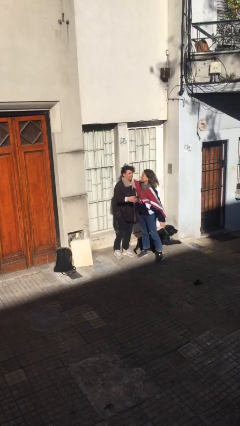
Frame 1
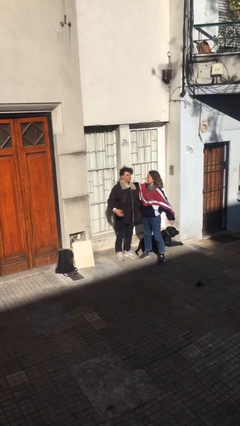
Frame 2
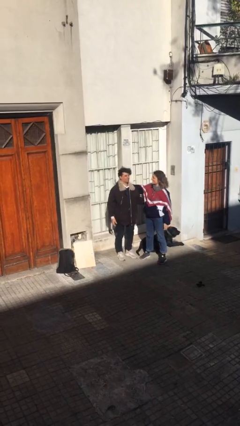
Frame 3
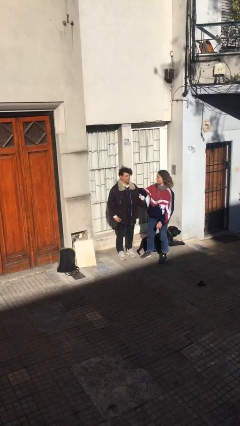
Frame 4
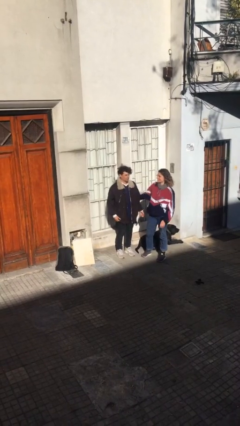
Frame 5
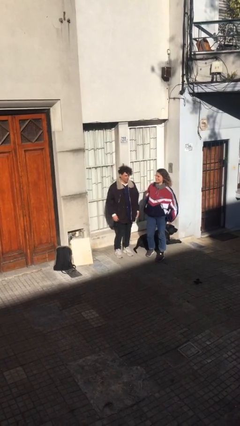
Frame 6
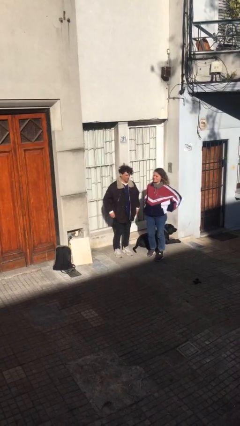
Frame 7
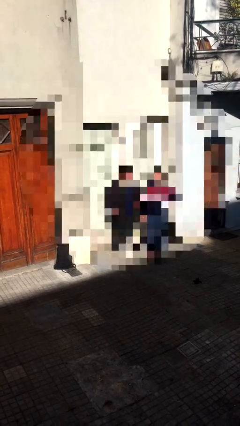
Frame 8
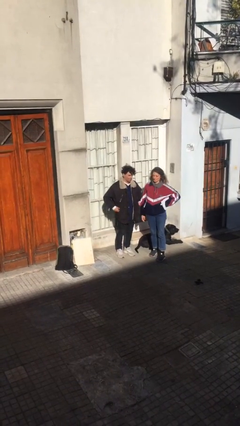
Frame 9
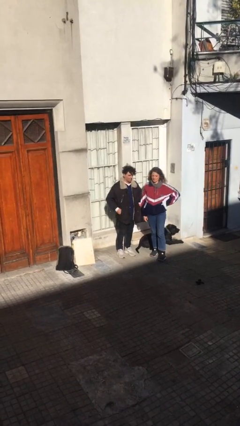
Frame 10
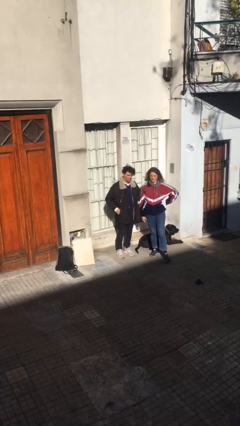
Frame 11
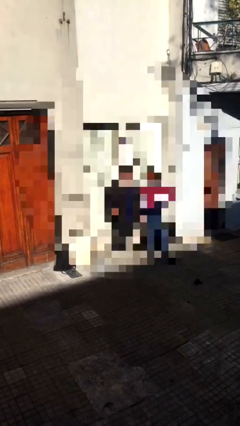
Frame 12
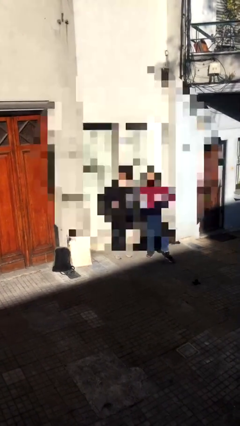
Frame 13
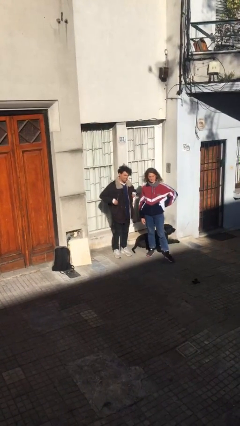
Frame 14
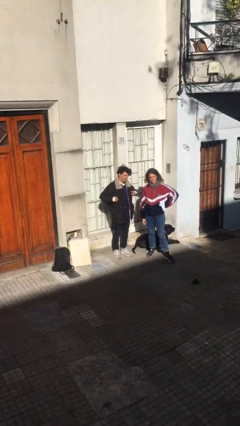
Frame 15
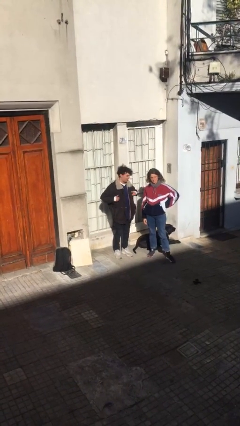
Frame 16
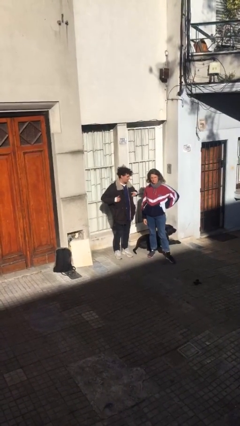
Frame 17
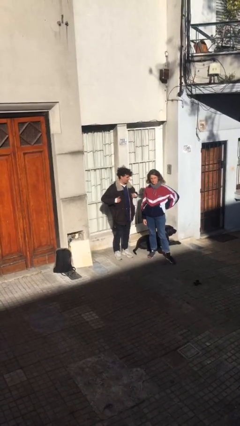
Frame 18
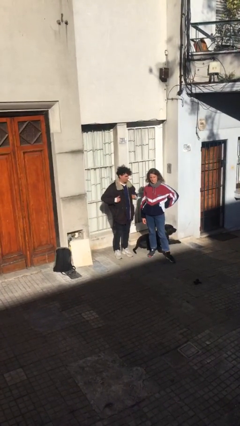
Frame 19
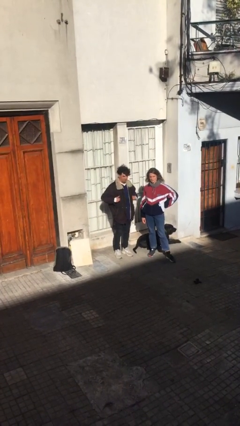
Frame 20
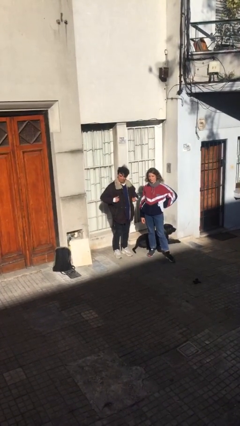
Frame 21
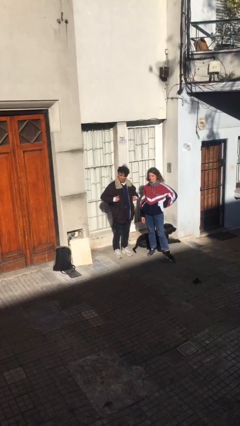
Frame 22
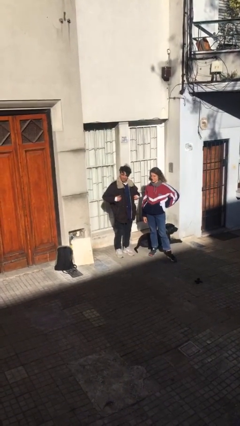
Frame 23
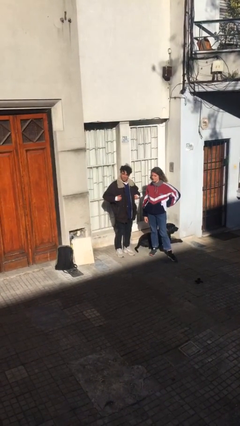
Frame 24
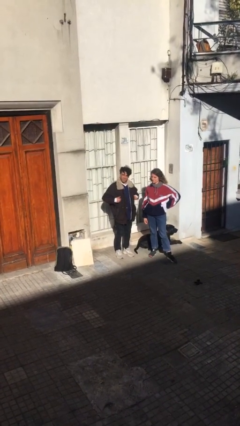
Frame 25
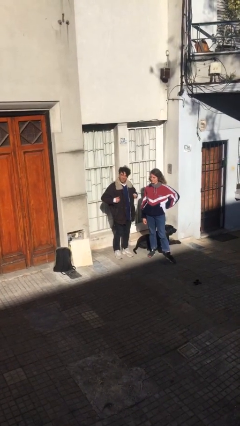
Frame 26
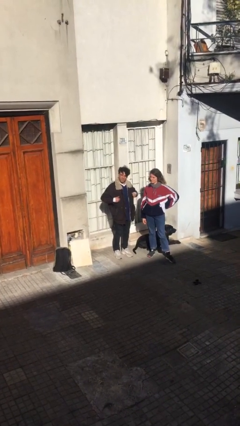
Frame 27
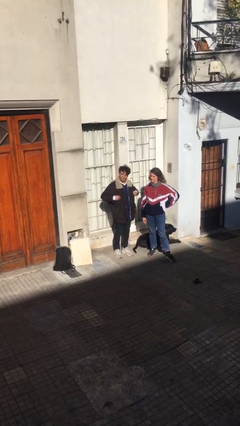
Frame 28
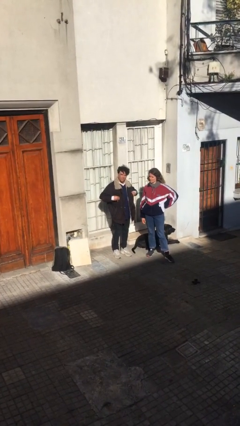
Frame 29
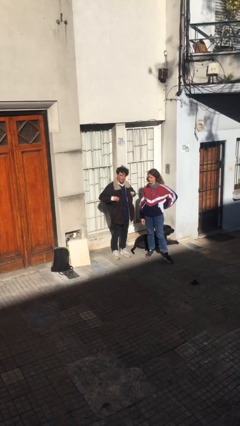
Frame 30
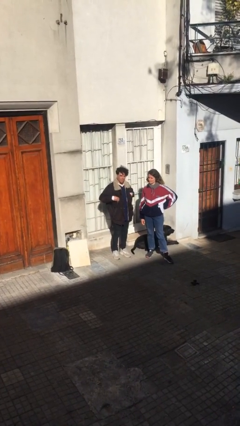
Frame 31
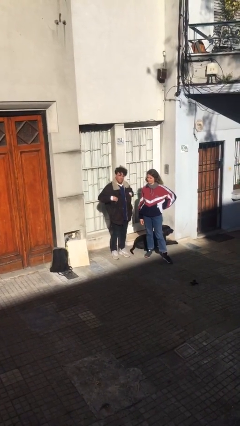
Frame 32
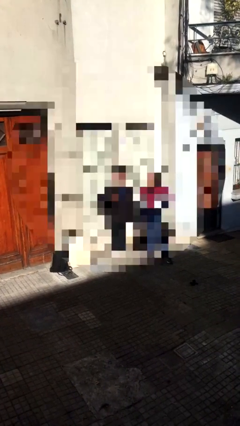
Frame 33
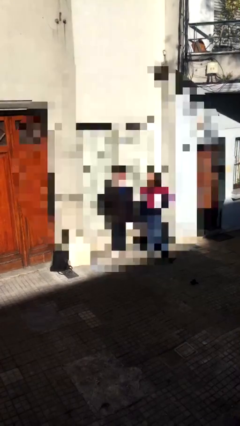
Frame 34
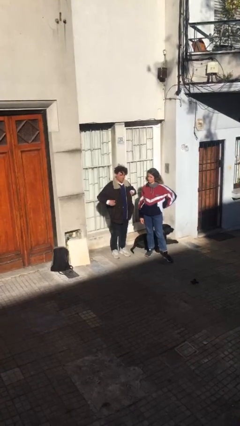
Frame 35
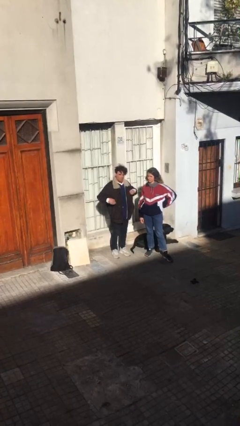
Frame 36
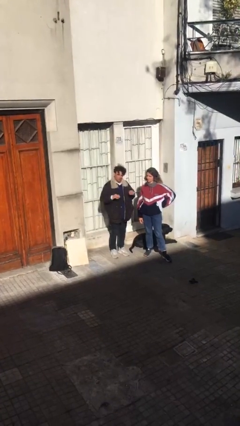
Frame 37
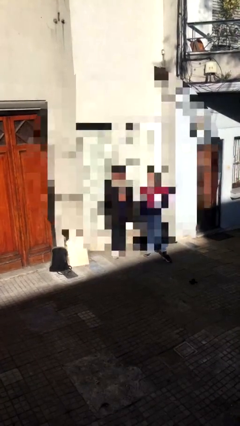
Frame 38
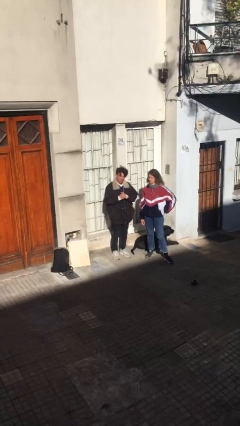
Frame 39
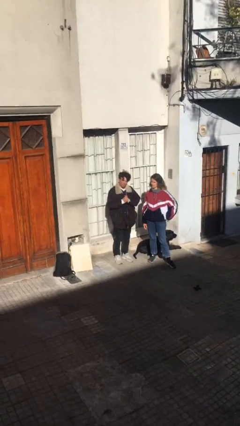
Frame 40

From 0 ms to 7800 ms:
person talks to person

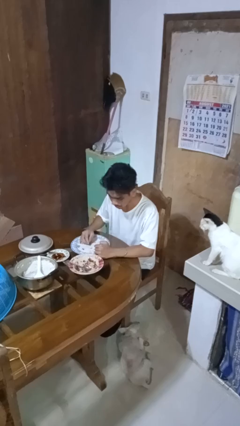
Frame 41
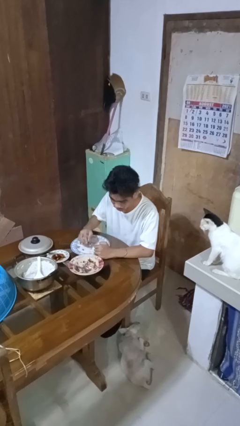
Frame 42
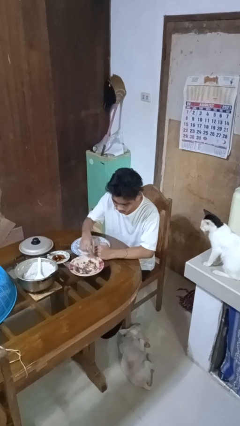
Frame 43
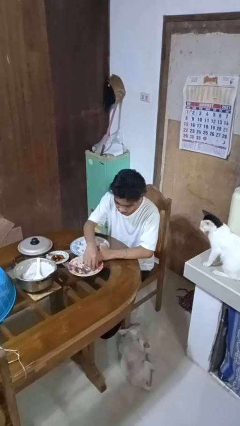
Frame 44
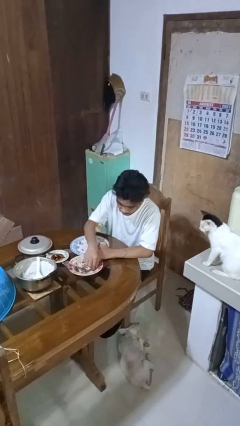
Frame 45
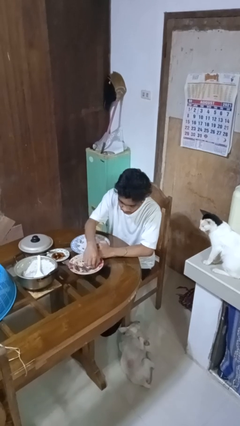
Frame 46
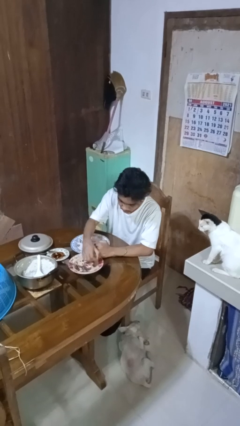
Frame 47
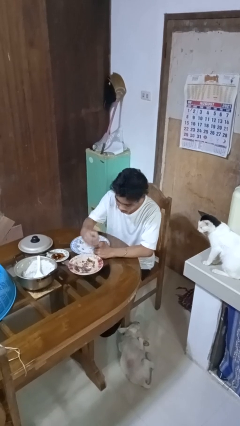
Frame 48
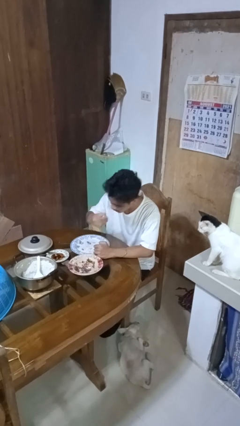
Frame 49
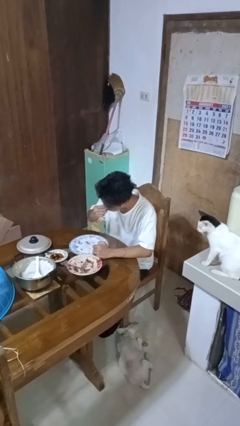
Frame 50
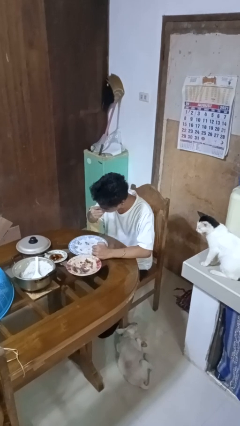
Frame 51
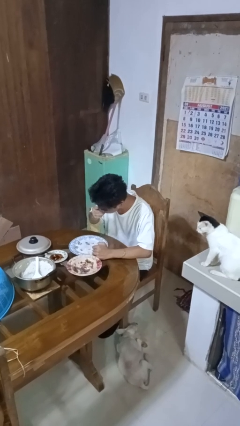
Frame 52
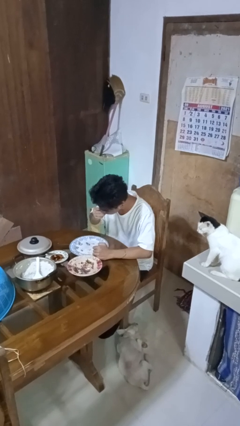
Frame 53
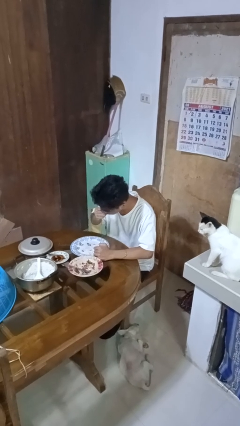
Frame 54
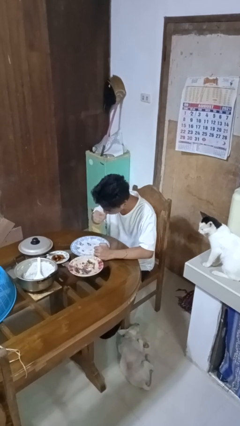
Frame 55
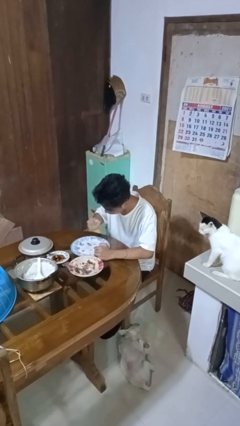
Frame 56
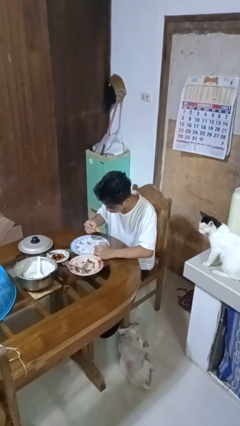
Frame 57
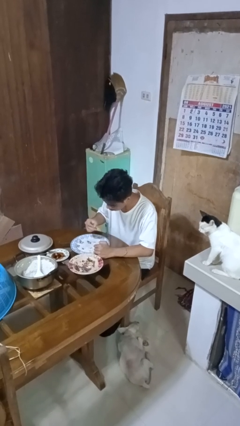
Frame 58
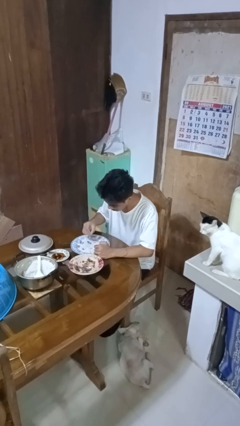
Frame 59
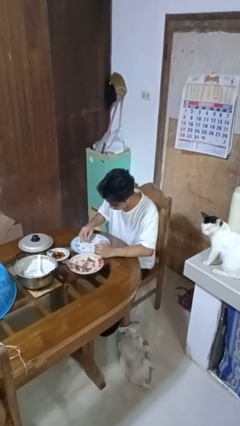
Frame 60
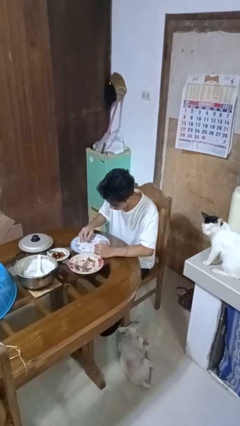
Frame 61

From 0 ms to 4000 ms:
person eats with hands

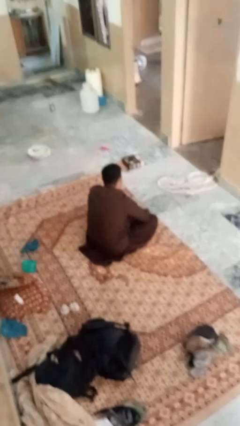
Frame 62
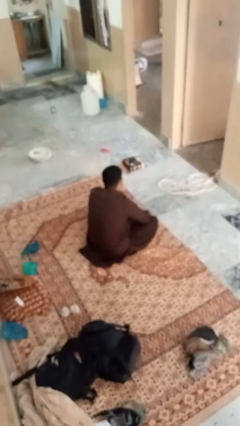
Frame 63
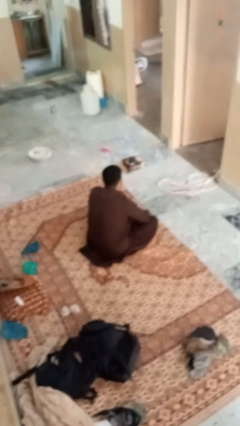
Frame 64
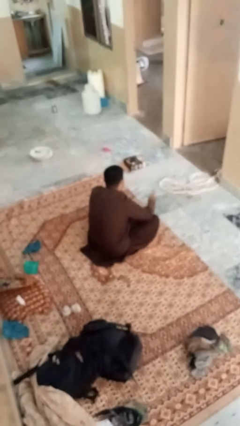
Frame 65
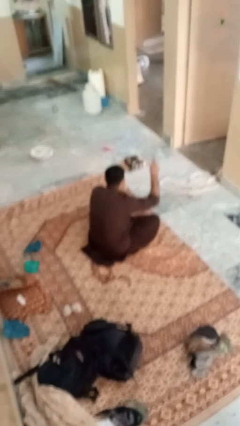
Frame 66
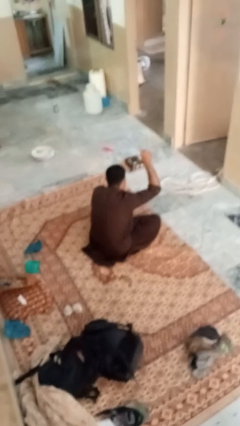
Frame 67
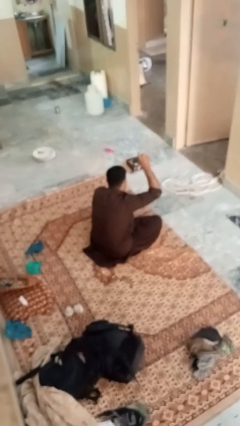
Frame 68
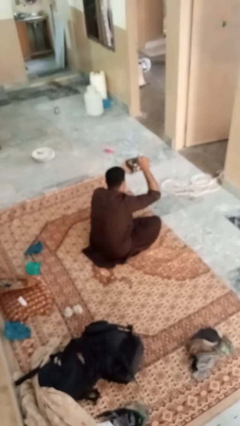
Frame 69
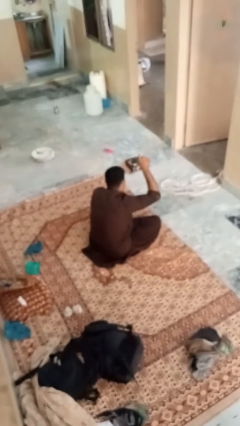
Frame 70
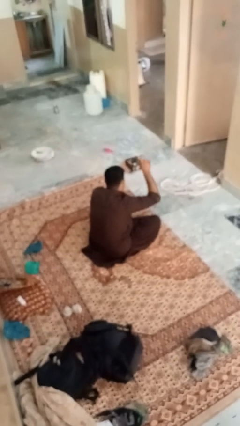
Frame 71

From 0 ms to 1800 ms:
person gestures number one

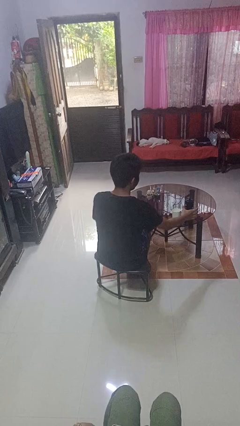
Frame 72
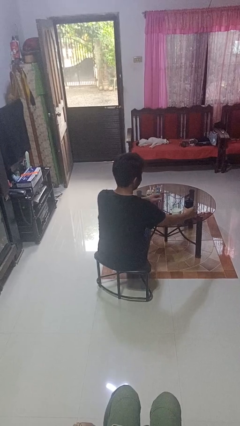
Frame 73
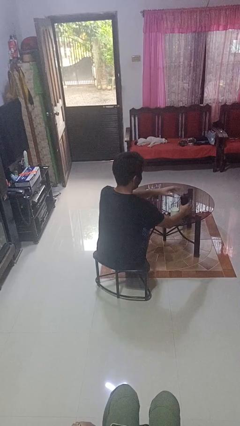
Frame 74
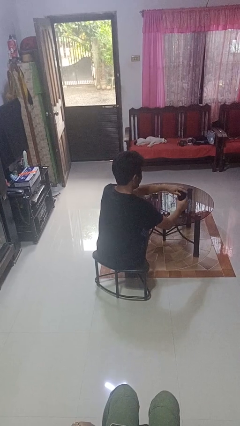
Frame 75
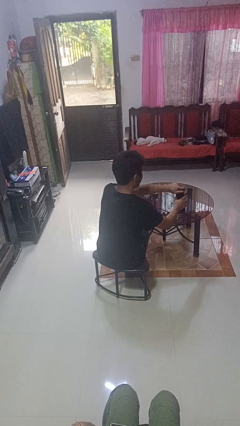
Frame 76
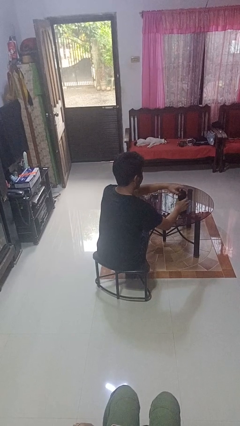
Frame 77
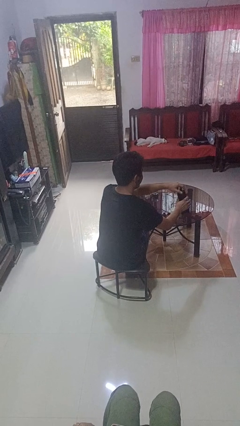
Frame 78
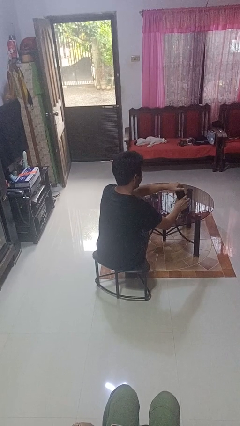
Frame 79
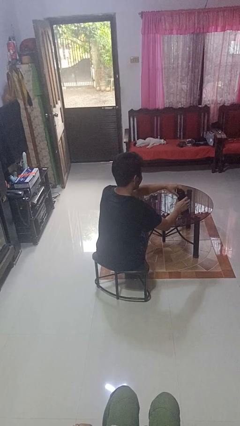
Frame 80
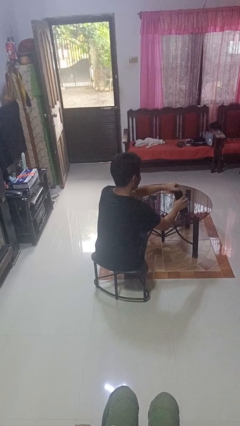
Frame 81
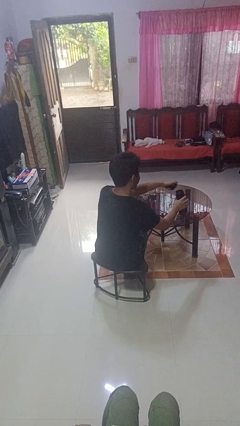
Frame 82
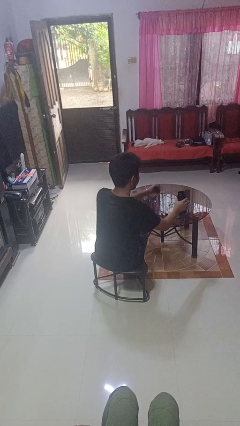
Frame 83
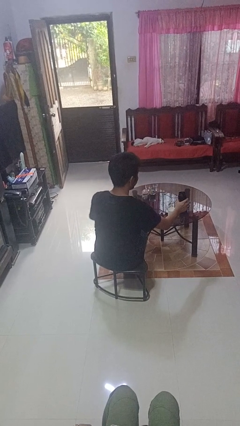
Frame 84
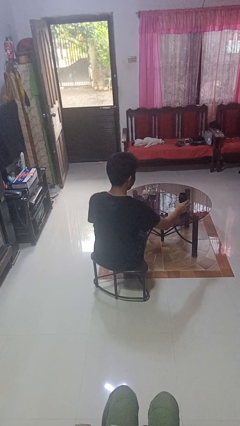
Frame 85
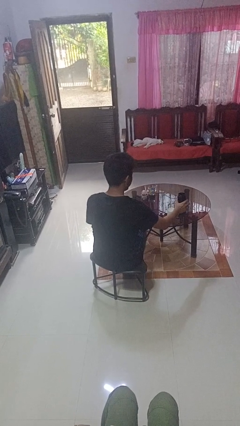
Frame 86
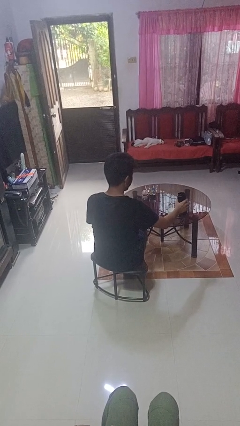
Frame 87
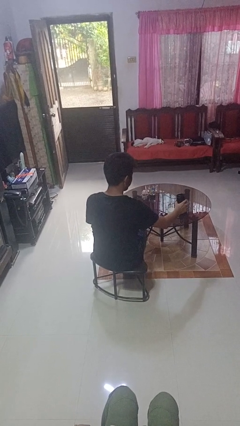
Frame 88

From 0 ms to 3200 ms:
person unscrews lid from bottle

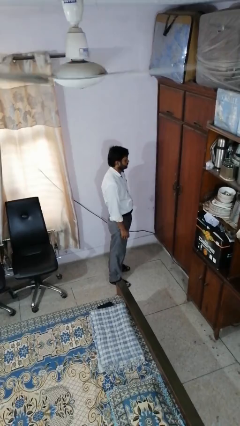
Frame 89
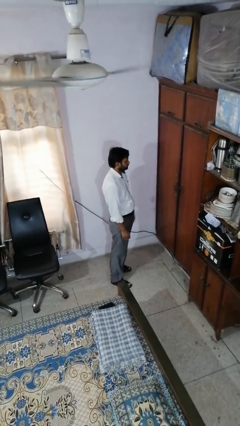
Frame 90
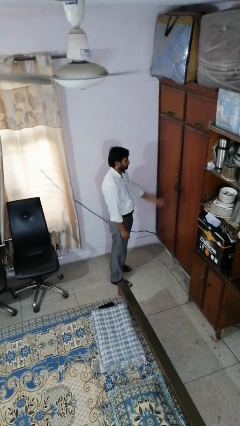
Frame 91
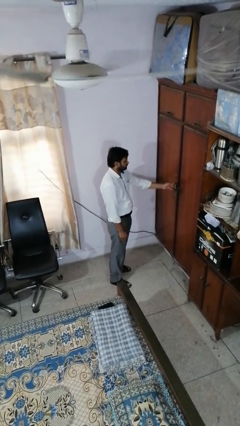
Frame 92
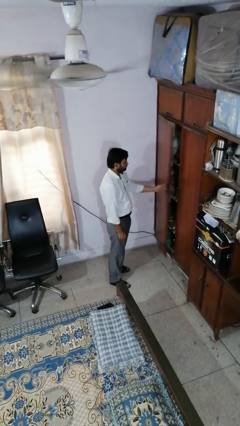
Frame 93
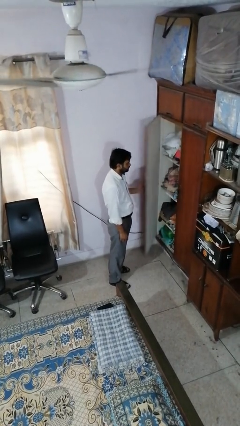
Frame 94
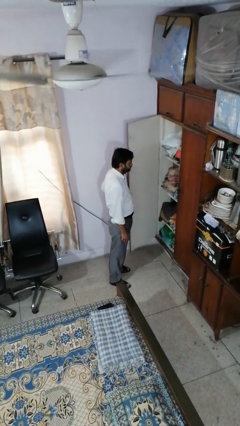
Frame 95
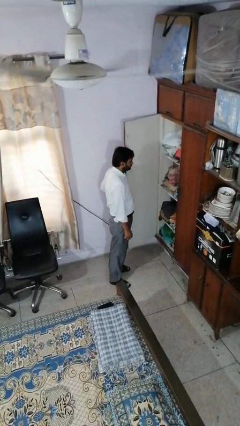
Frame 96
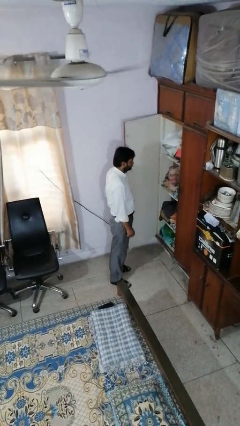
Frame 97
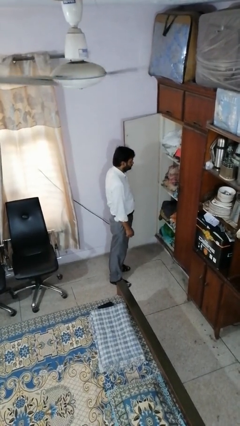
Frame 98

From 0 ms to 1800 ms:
person opens closet door
